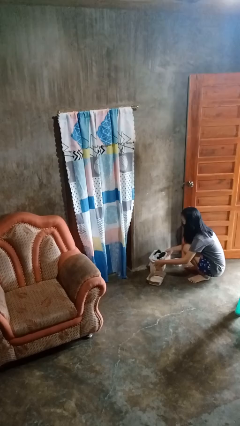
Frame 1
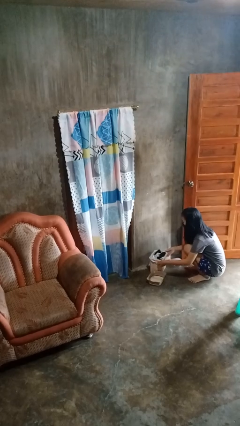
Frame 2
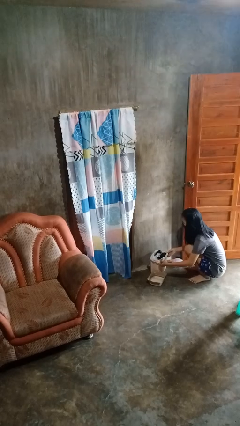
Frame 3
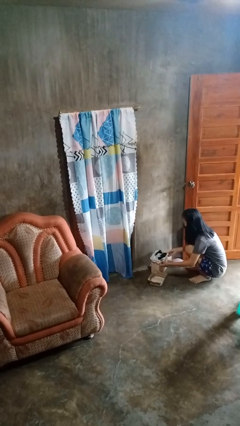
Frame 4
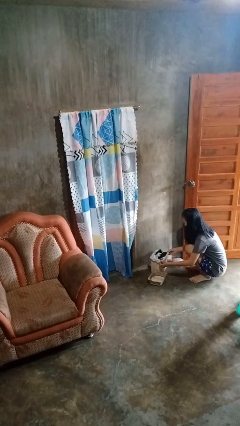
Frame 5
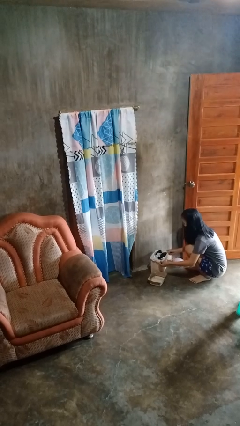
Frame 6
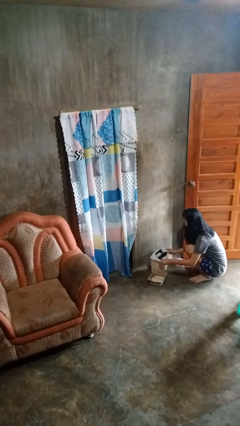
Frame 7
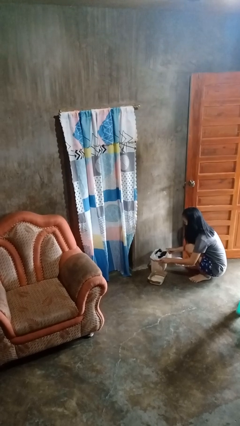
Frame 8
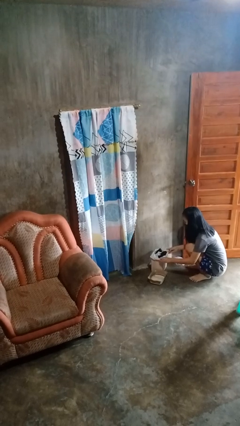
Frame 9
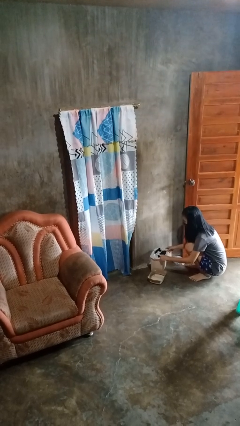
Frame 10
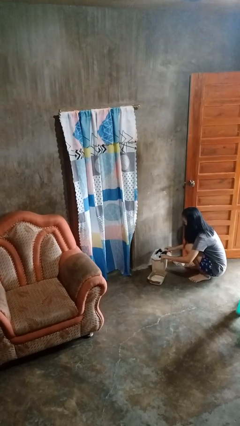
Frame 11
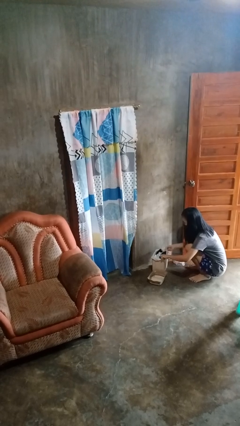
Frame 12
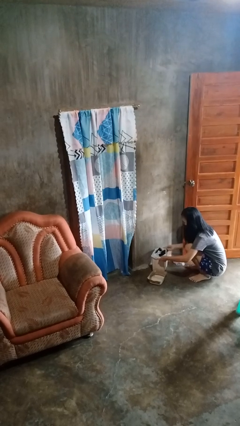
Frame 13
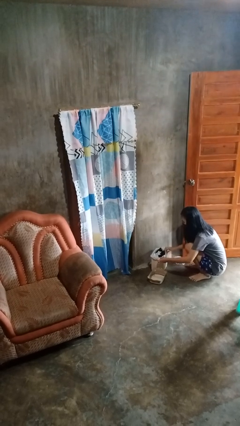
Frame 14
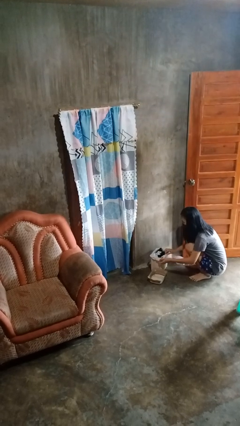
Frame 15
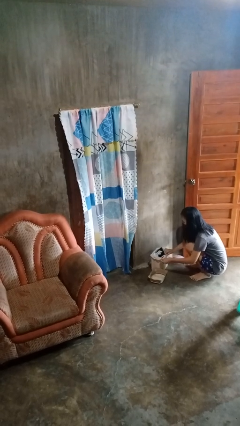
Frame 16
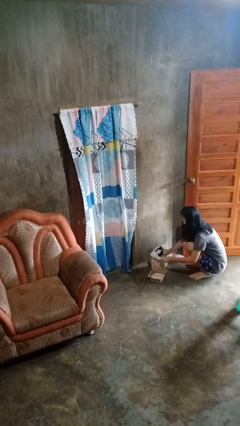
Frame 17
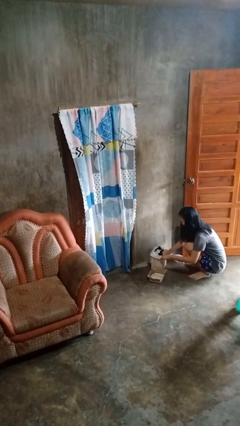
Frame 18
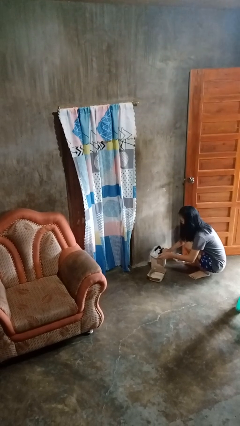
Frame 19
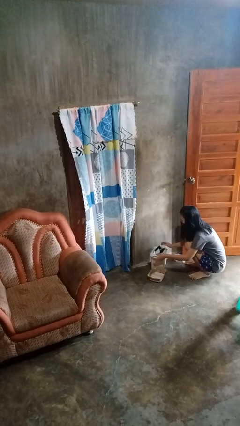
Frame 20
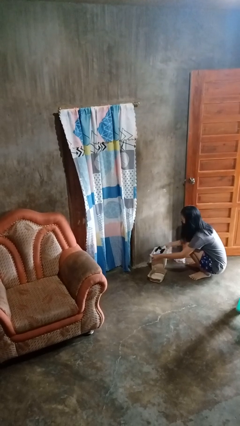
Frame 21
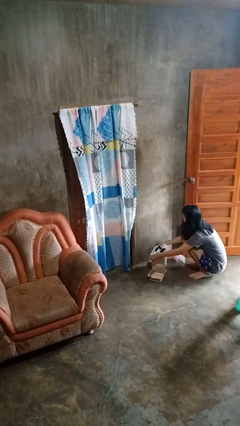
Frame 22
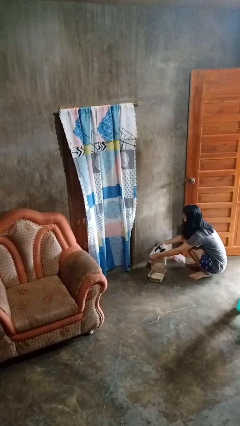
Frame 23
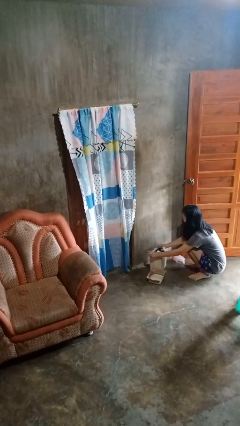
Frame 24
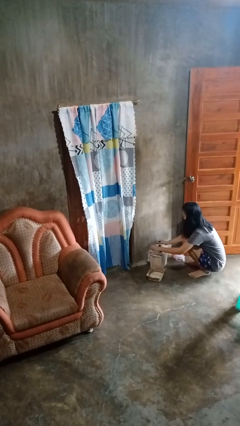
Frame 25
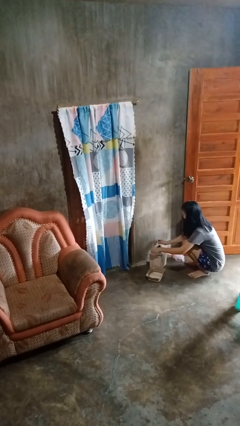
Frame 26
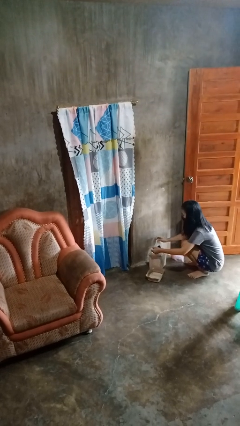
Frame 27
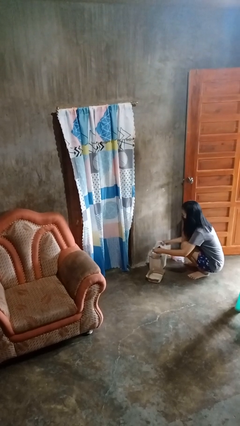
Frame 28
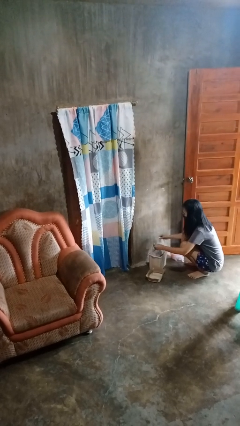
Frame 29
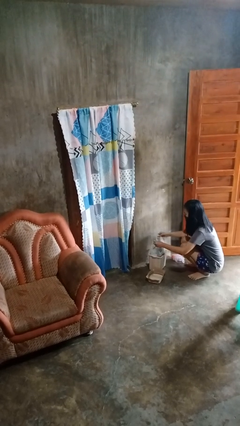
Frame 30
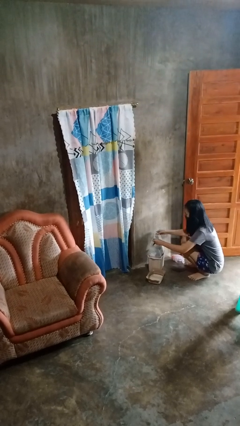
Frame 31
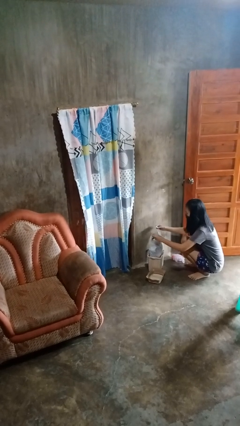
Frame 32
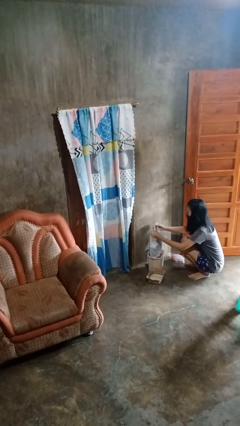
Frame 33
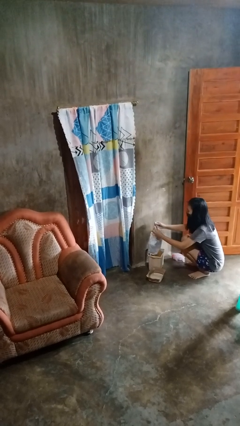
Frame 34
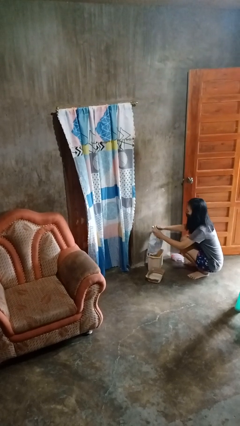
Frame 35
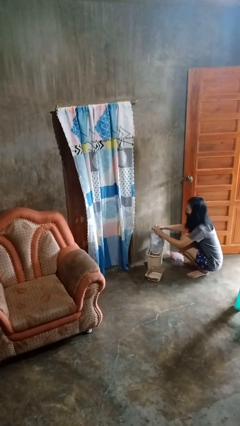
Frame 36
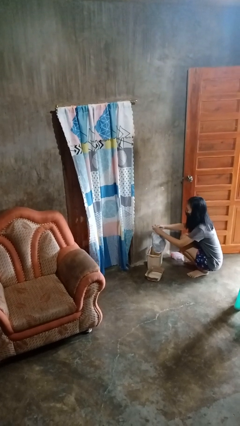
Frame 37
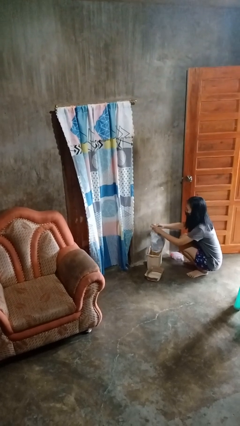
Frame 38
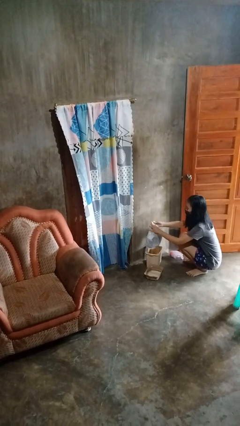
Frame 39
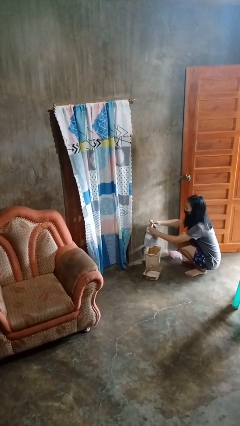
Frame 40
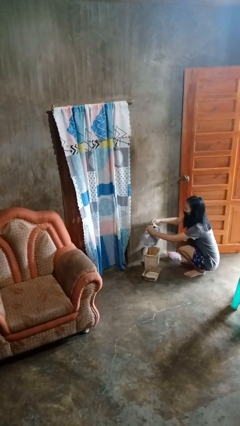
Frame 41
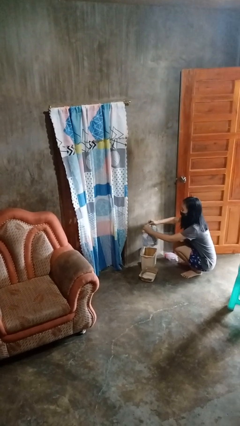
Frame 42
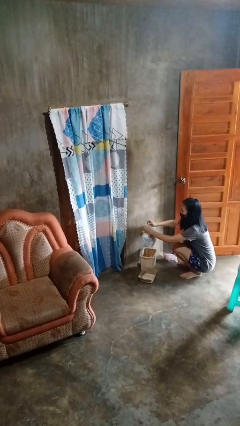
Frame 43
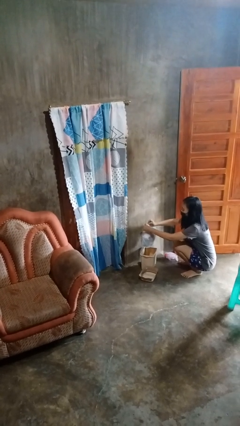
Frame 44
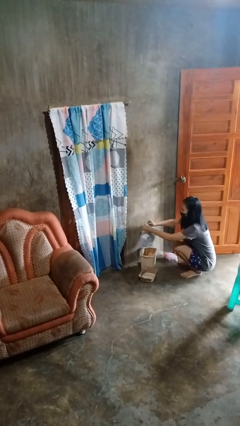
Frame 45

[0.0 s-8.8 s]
person removes trashbag from trashcan

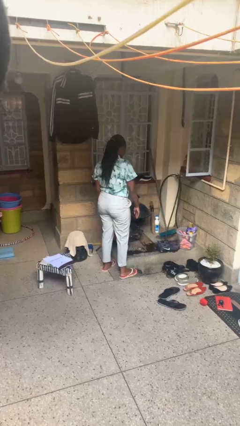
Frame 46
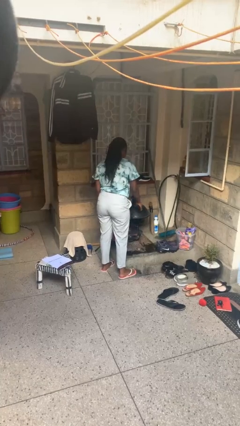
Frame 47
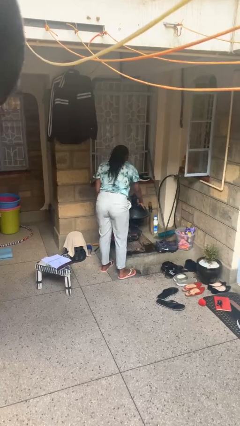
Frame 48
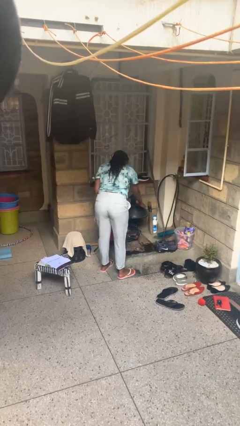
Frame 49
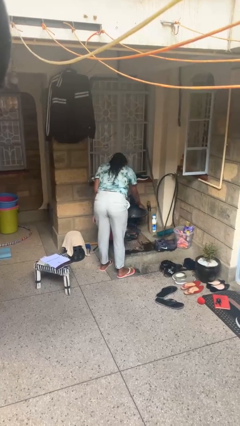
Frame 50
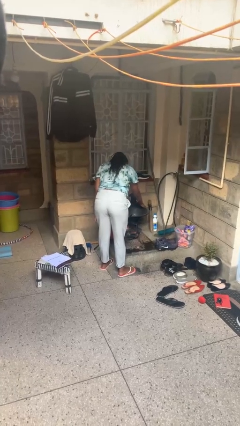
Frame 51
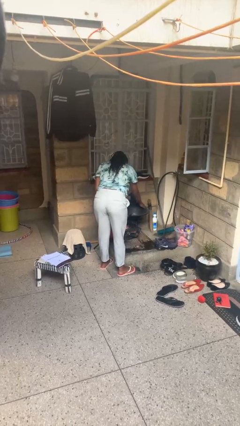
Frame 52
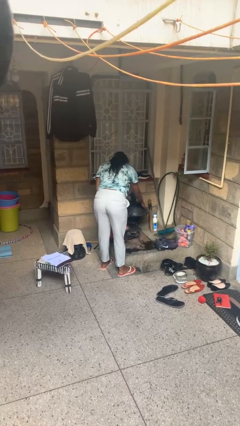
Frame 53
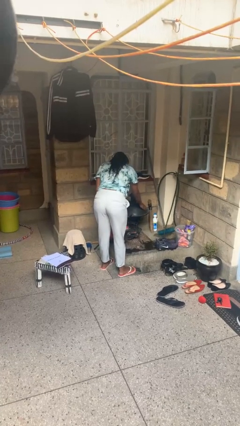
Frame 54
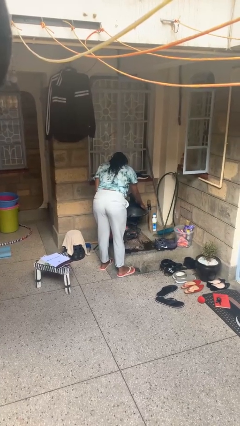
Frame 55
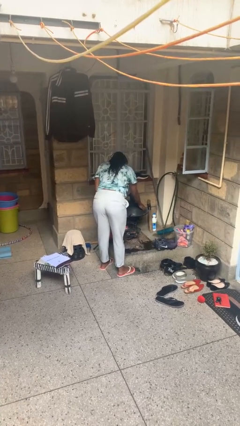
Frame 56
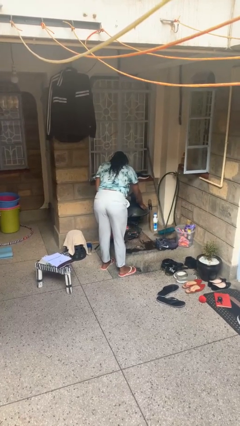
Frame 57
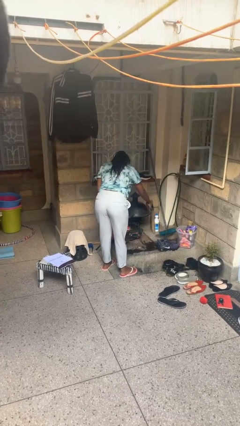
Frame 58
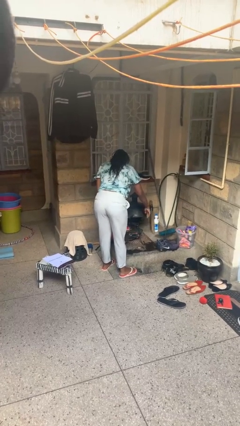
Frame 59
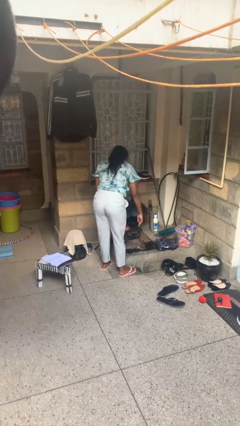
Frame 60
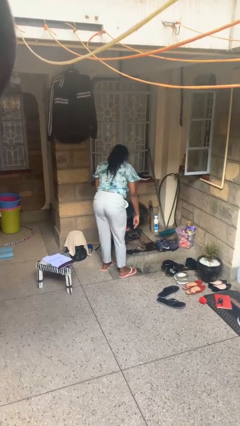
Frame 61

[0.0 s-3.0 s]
person taps object with finger

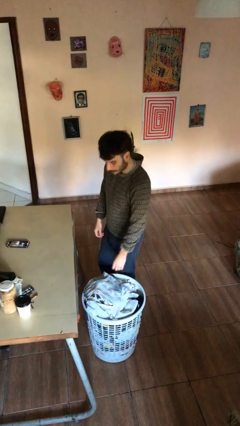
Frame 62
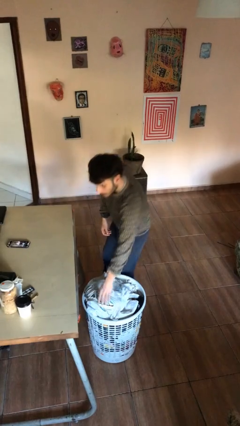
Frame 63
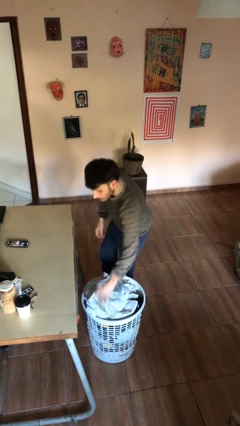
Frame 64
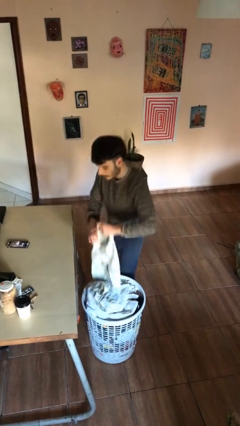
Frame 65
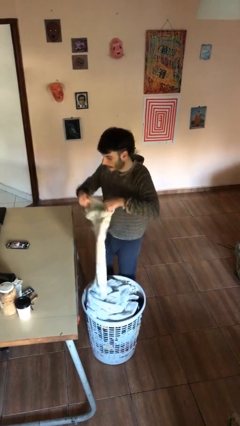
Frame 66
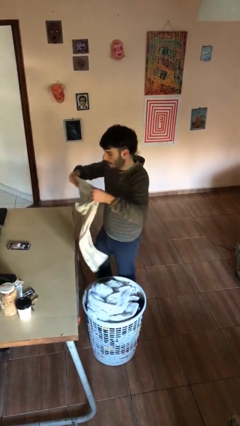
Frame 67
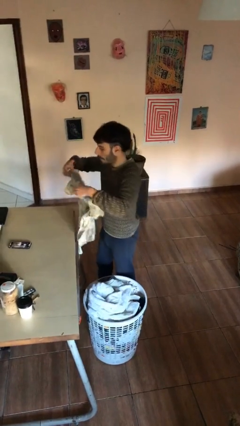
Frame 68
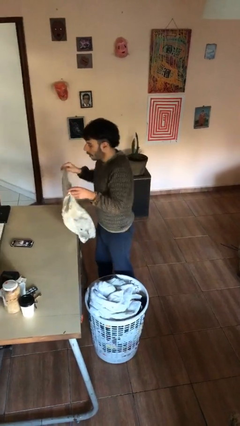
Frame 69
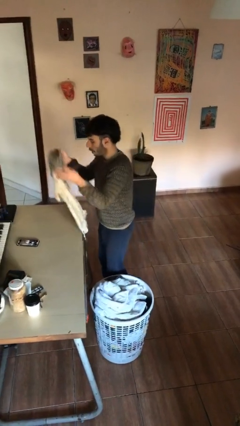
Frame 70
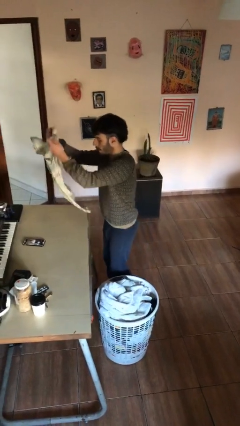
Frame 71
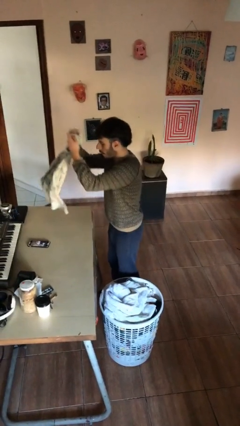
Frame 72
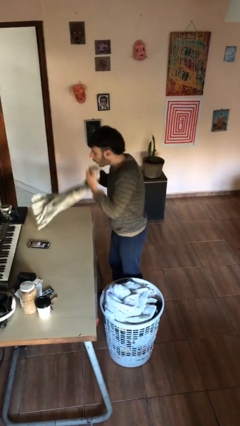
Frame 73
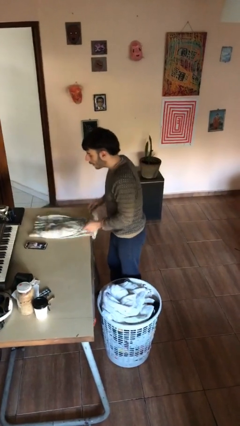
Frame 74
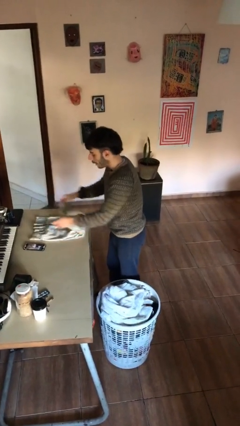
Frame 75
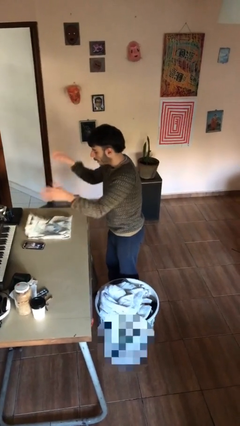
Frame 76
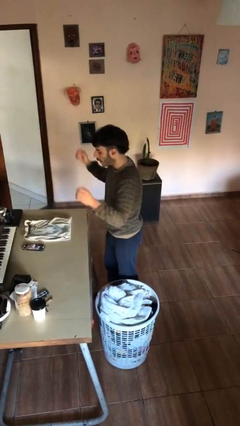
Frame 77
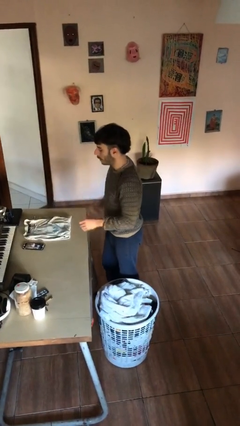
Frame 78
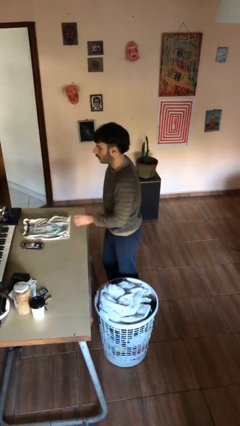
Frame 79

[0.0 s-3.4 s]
person folds shirt

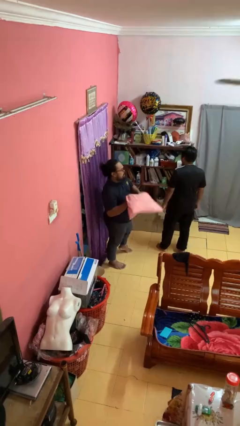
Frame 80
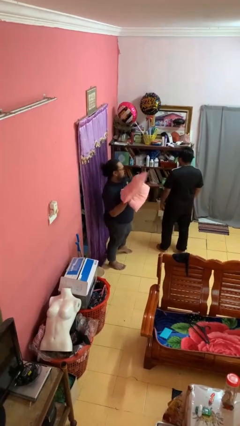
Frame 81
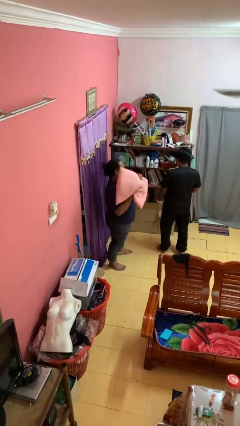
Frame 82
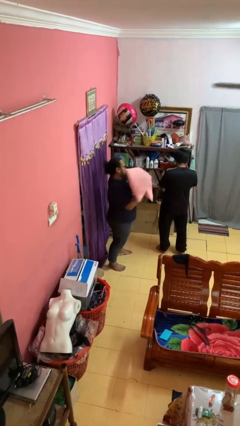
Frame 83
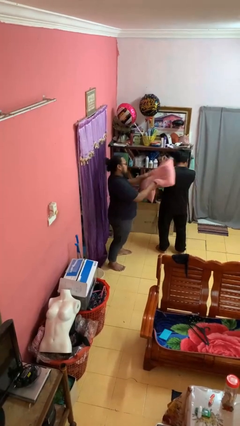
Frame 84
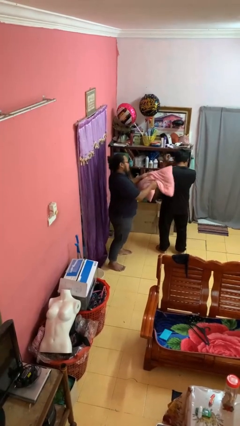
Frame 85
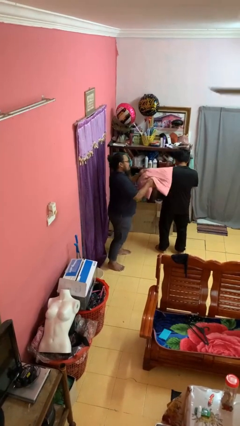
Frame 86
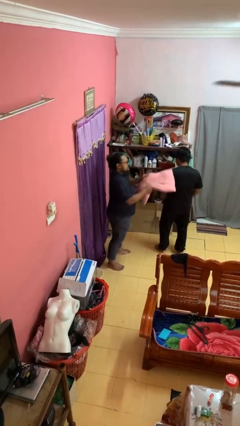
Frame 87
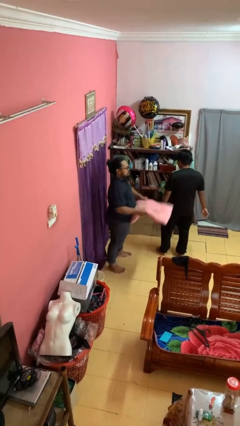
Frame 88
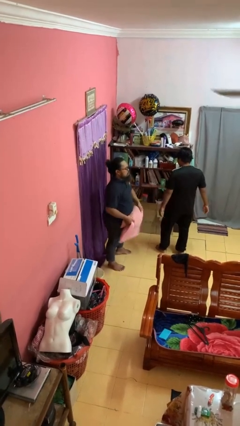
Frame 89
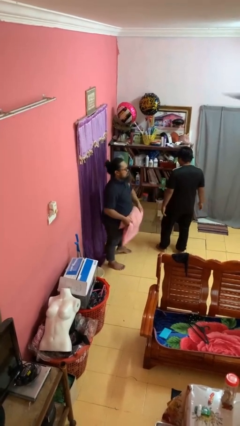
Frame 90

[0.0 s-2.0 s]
person hits person with pillow

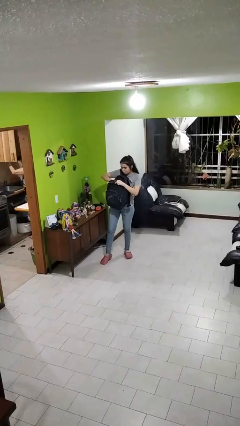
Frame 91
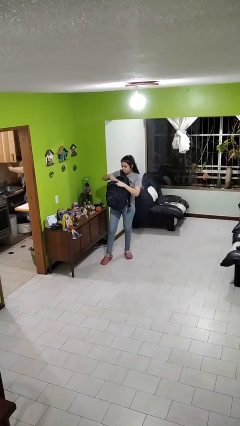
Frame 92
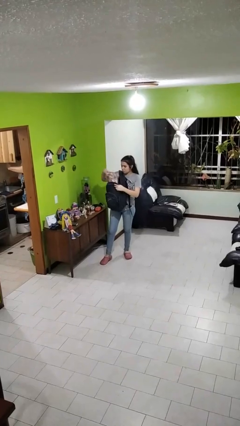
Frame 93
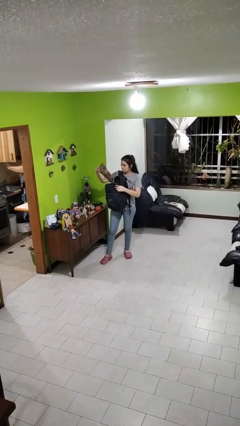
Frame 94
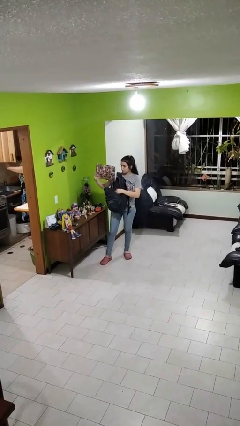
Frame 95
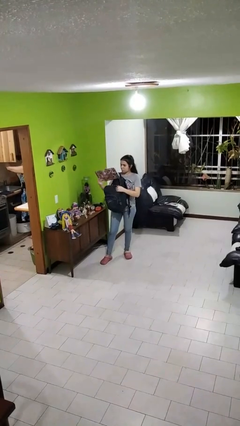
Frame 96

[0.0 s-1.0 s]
person takes object from backpack
